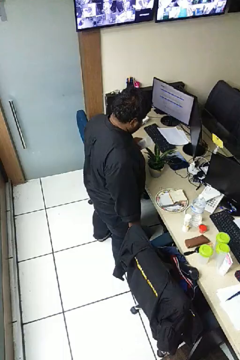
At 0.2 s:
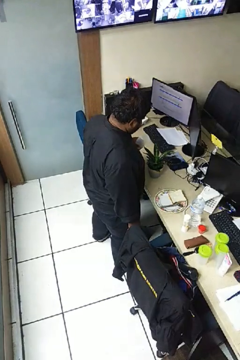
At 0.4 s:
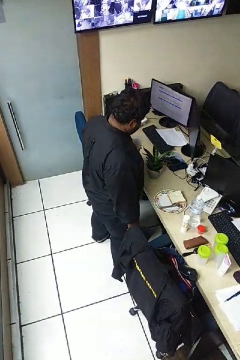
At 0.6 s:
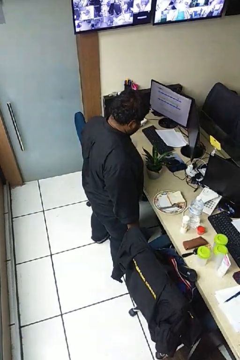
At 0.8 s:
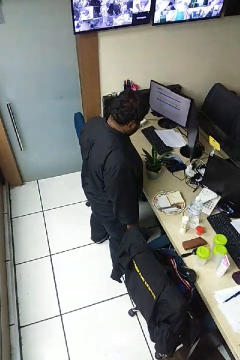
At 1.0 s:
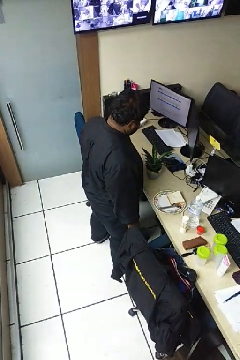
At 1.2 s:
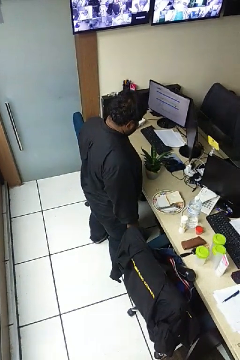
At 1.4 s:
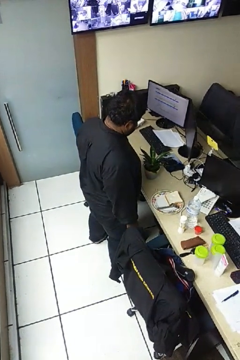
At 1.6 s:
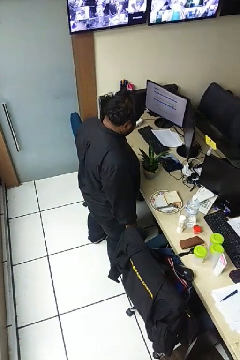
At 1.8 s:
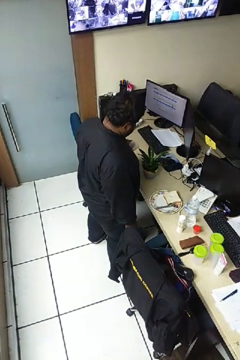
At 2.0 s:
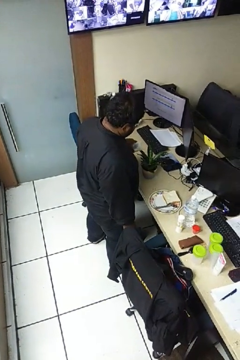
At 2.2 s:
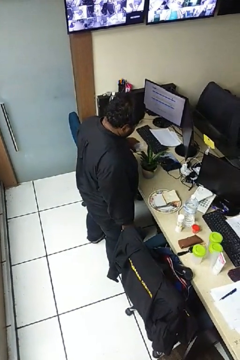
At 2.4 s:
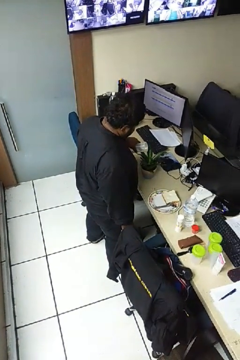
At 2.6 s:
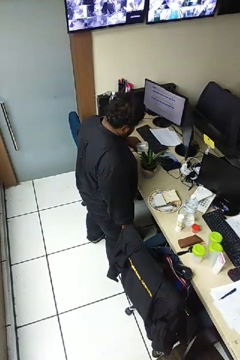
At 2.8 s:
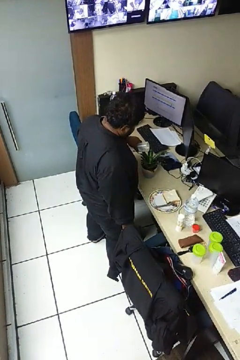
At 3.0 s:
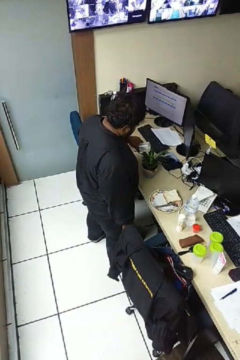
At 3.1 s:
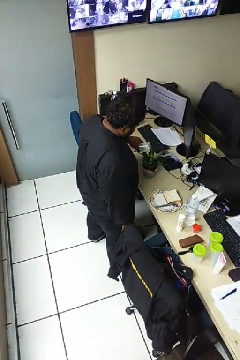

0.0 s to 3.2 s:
person waters houseplant

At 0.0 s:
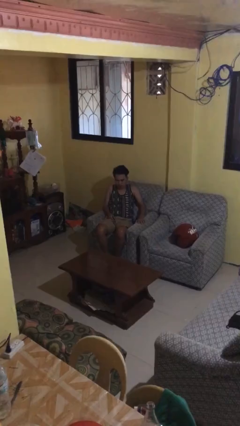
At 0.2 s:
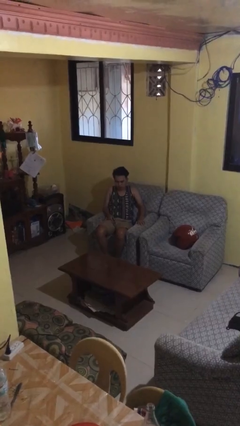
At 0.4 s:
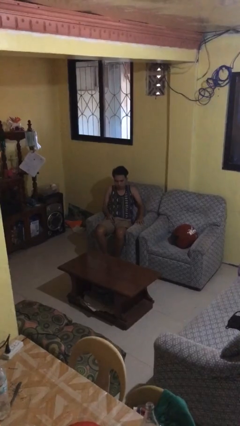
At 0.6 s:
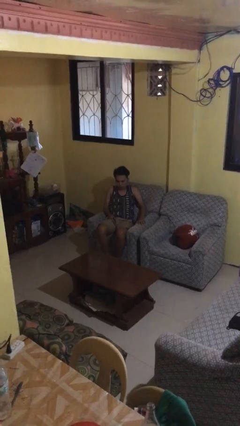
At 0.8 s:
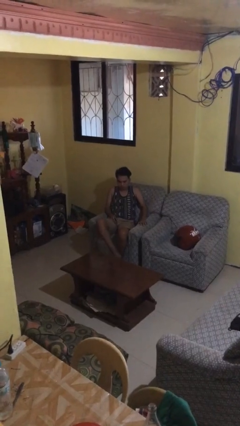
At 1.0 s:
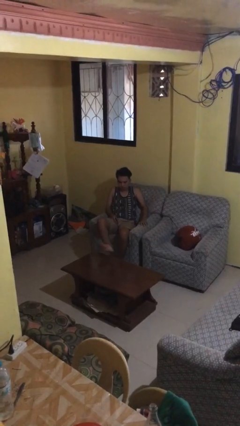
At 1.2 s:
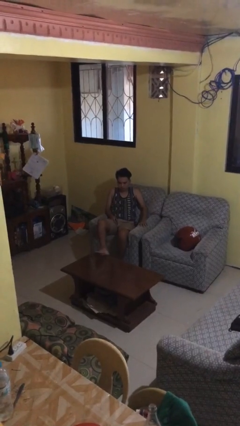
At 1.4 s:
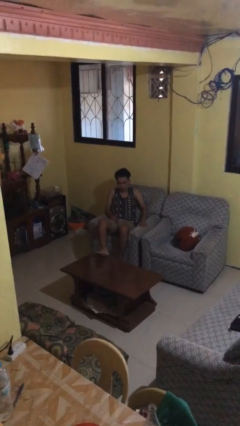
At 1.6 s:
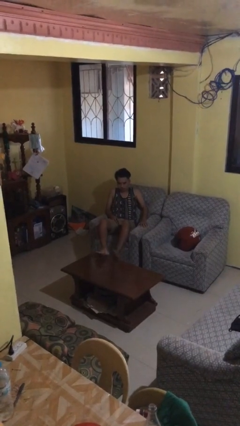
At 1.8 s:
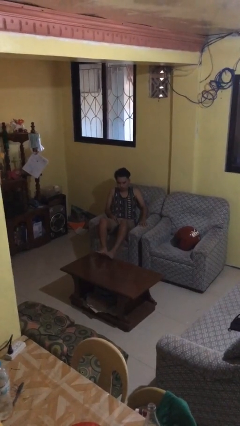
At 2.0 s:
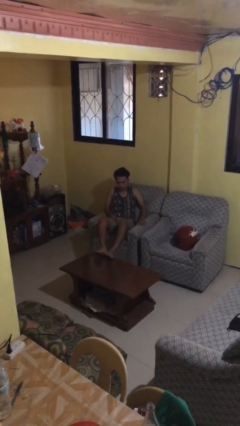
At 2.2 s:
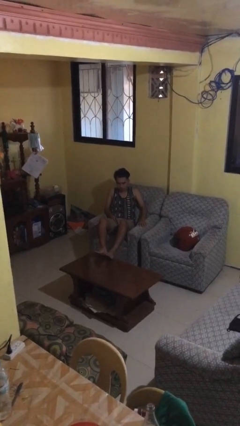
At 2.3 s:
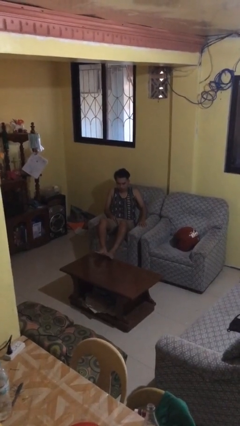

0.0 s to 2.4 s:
person puts feet up

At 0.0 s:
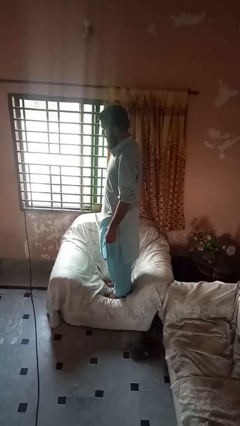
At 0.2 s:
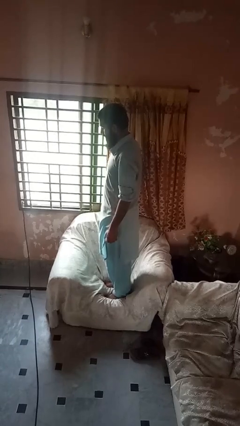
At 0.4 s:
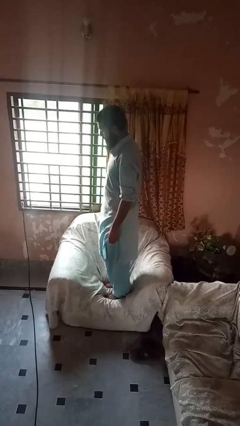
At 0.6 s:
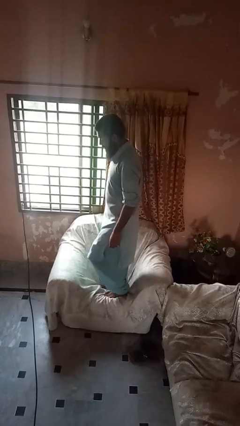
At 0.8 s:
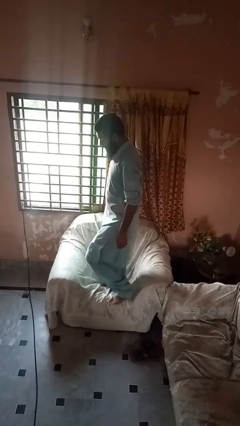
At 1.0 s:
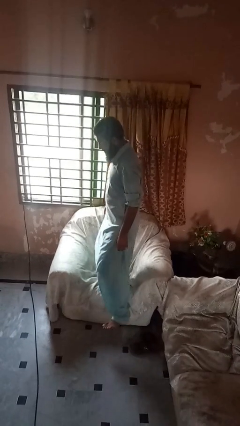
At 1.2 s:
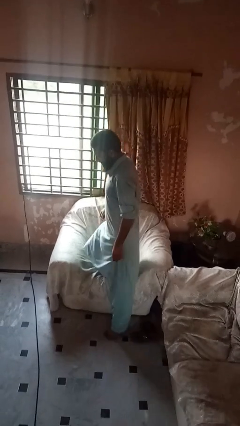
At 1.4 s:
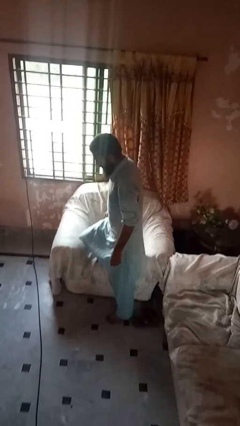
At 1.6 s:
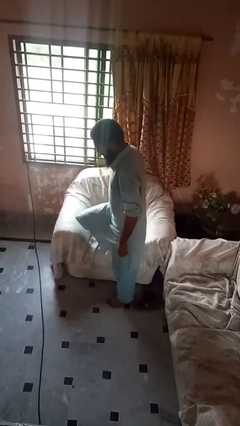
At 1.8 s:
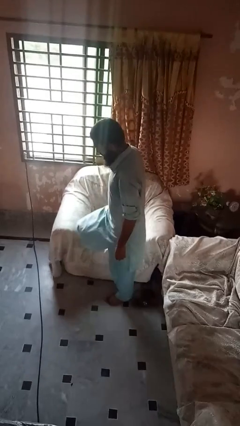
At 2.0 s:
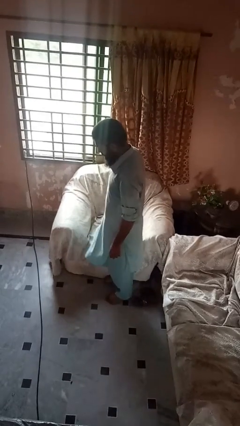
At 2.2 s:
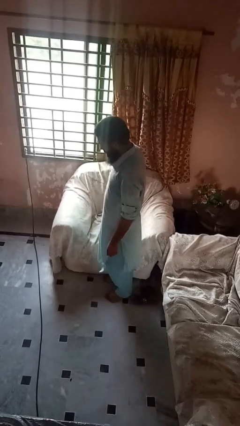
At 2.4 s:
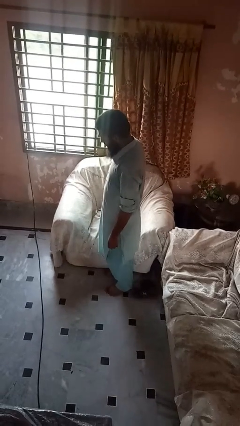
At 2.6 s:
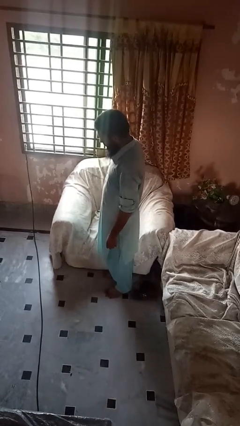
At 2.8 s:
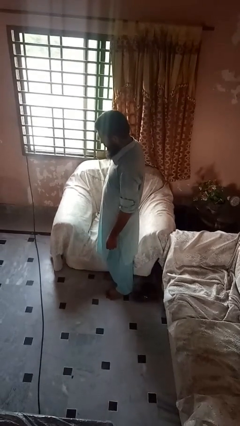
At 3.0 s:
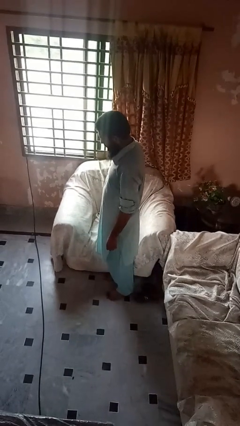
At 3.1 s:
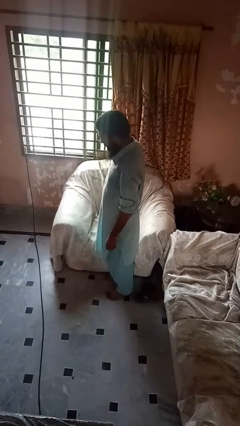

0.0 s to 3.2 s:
person climbs off couch

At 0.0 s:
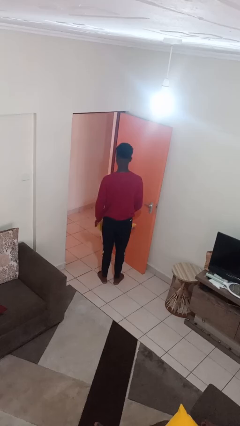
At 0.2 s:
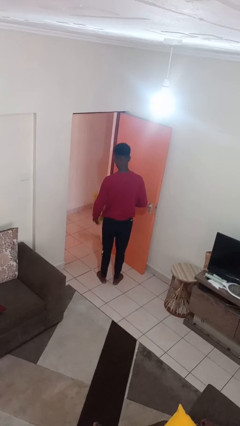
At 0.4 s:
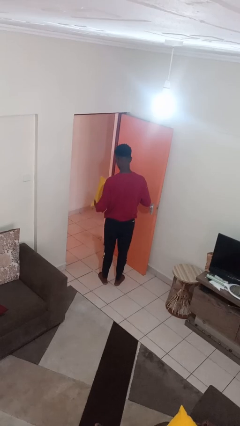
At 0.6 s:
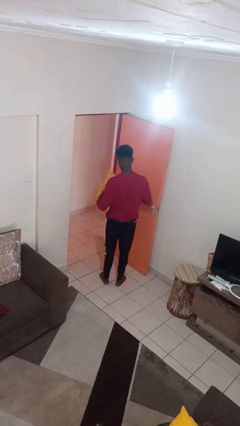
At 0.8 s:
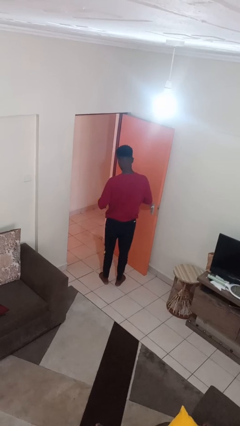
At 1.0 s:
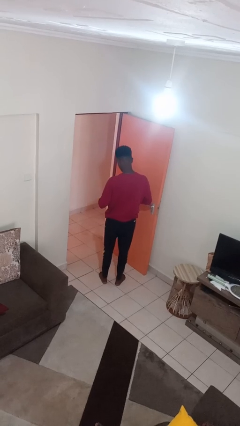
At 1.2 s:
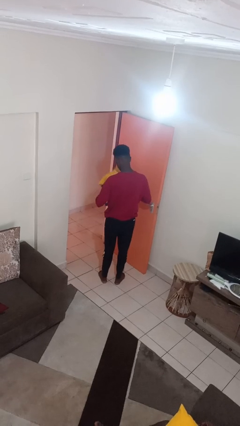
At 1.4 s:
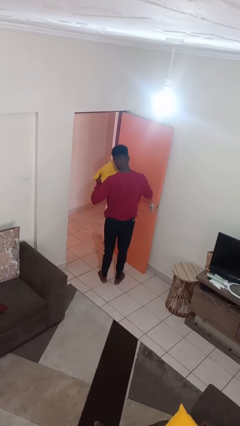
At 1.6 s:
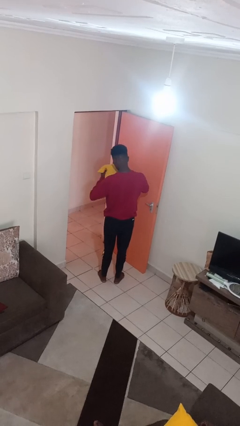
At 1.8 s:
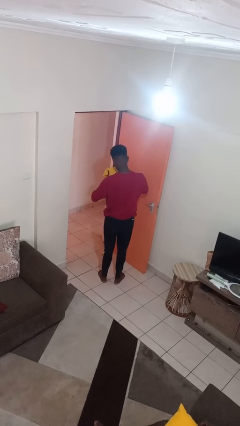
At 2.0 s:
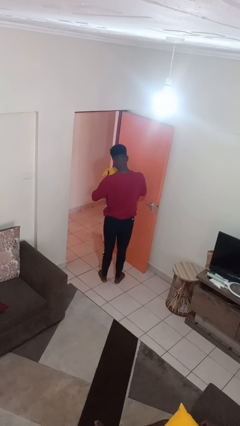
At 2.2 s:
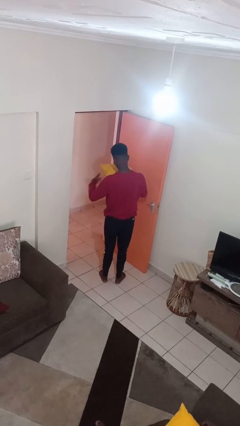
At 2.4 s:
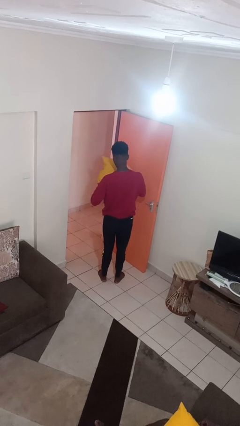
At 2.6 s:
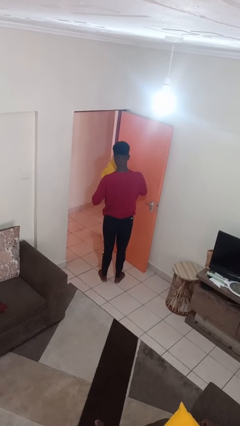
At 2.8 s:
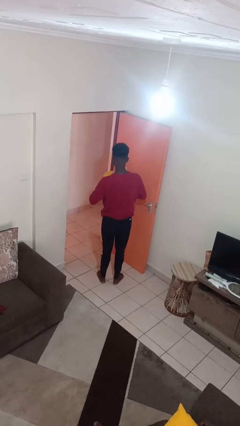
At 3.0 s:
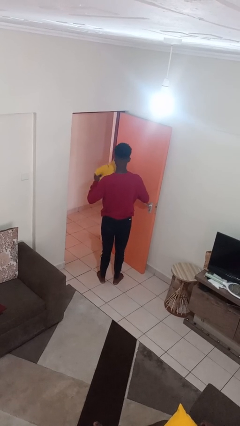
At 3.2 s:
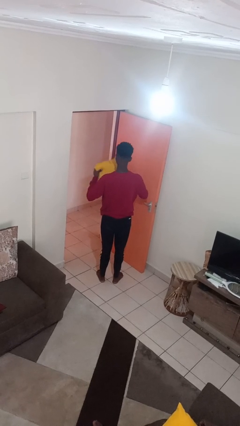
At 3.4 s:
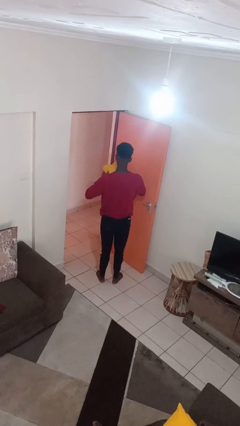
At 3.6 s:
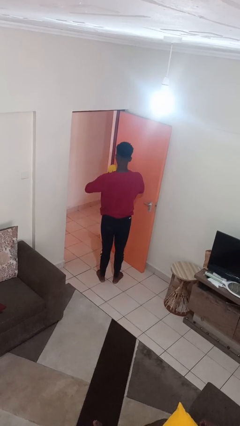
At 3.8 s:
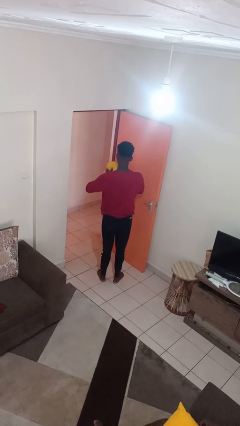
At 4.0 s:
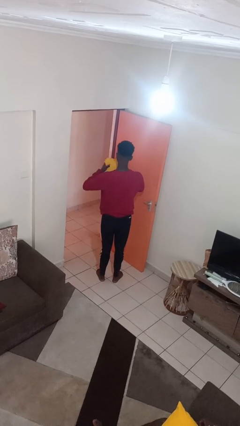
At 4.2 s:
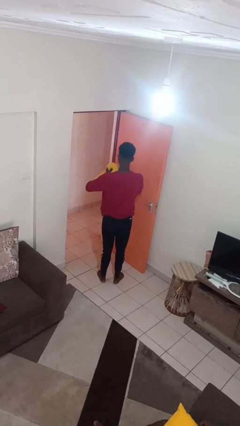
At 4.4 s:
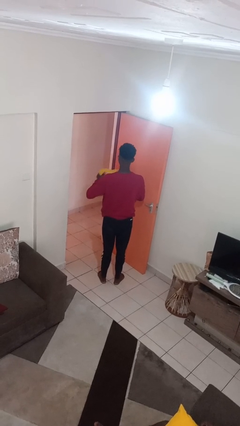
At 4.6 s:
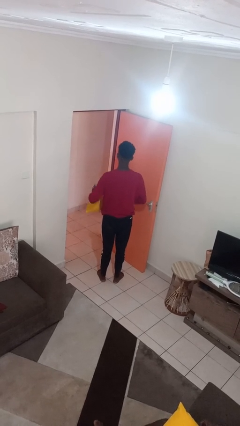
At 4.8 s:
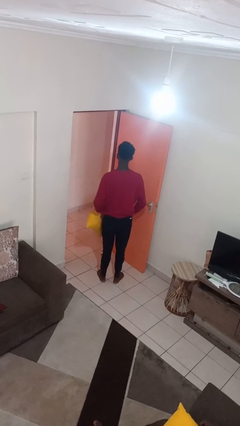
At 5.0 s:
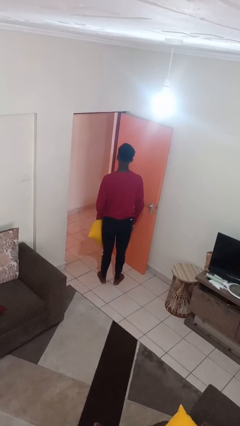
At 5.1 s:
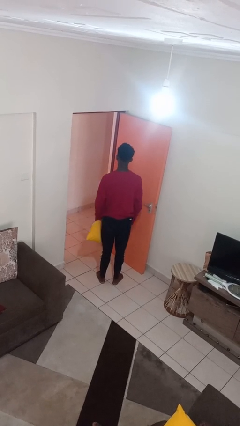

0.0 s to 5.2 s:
person squeezes object

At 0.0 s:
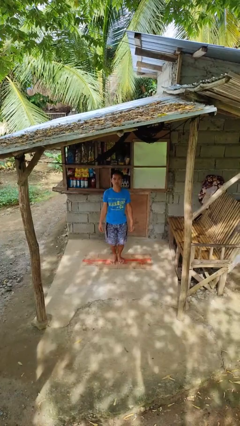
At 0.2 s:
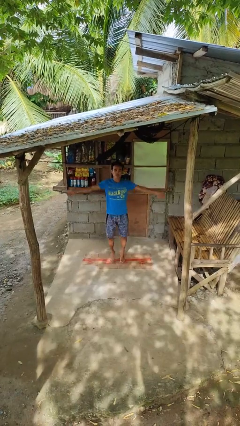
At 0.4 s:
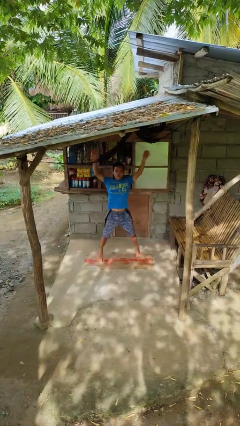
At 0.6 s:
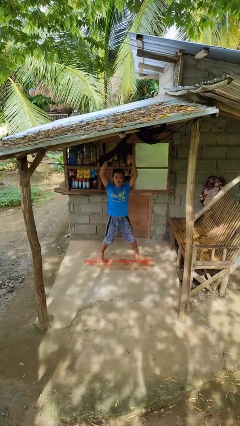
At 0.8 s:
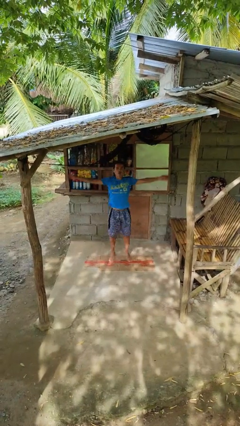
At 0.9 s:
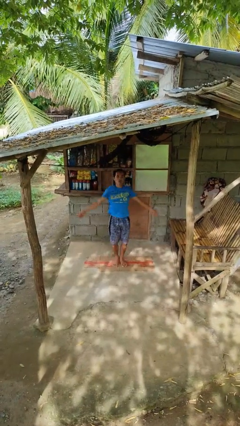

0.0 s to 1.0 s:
person exercises with jumping jacks

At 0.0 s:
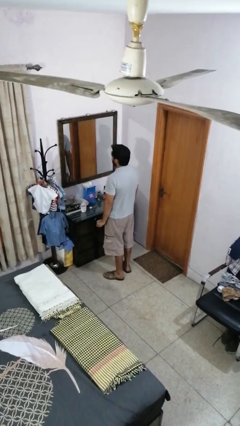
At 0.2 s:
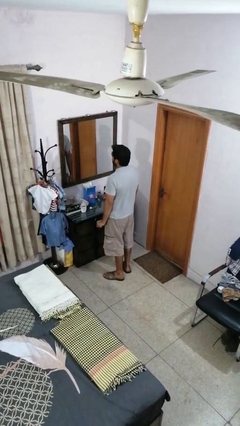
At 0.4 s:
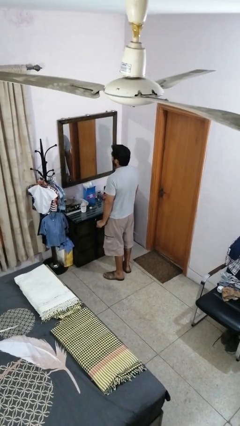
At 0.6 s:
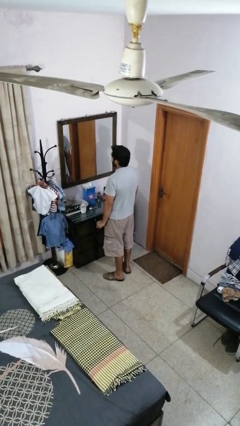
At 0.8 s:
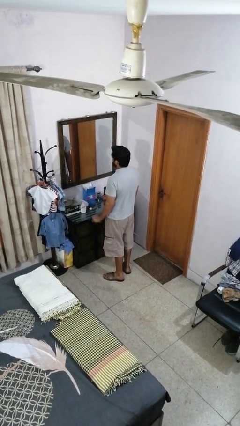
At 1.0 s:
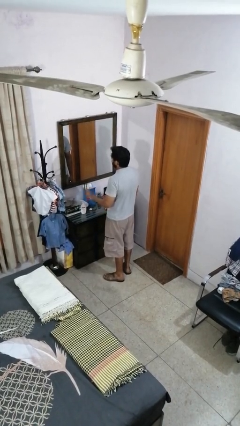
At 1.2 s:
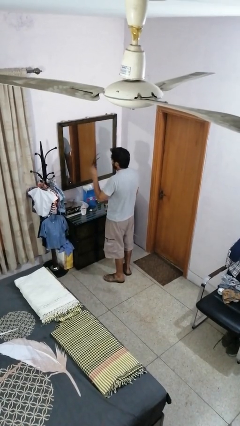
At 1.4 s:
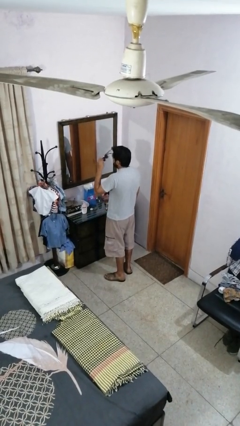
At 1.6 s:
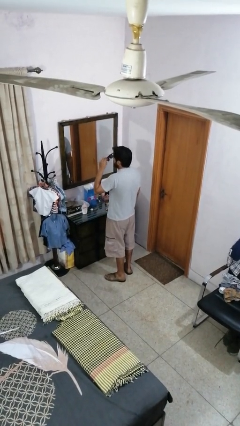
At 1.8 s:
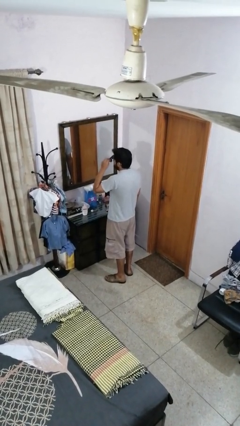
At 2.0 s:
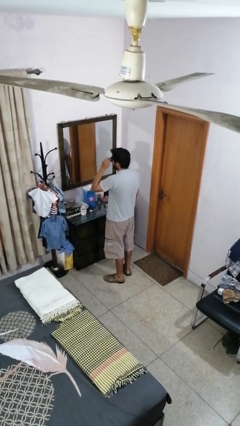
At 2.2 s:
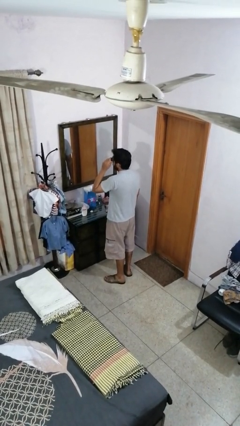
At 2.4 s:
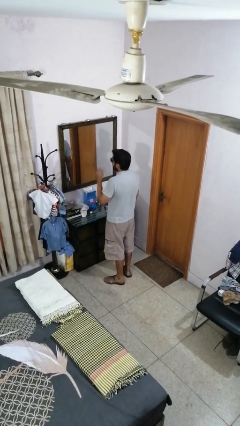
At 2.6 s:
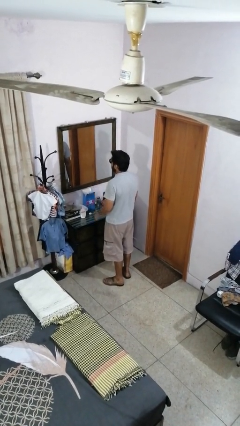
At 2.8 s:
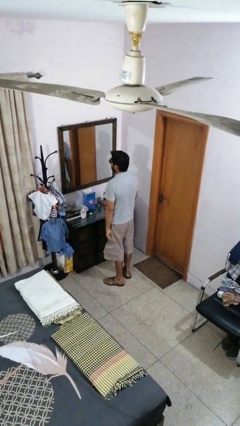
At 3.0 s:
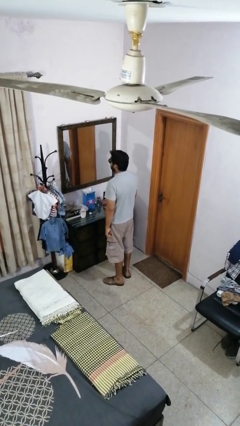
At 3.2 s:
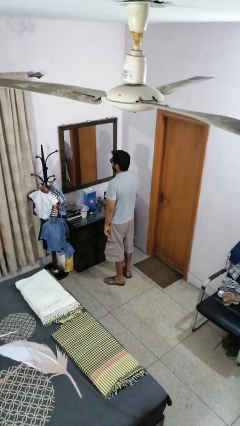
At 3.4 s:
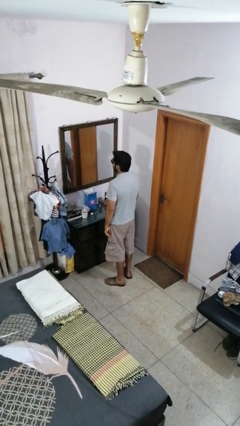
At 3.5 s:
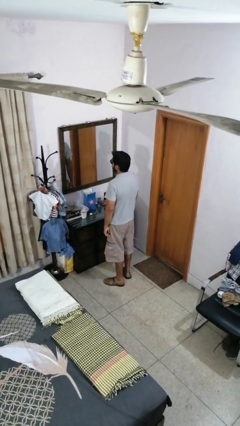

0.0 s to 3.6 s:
person puts on sunglasses
